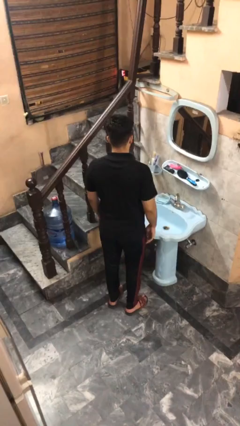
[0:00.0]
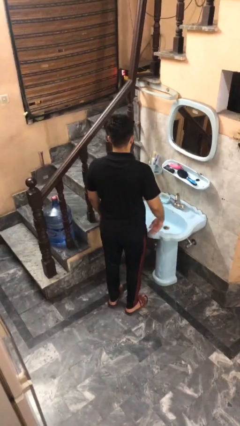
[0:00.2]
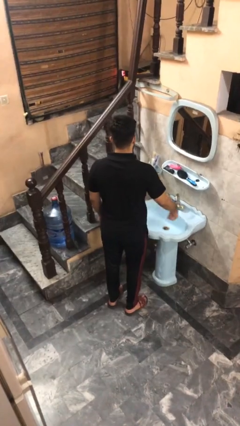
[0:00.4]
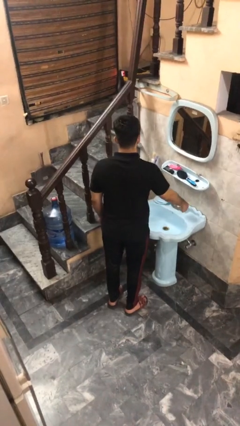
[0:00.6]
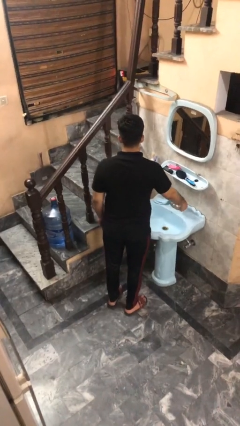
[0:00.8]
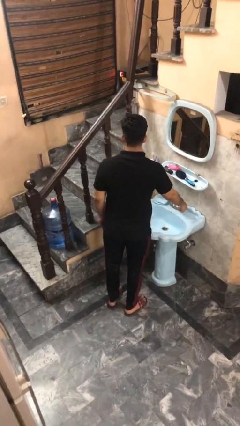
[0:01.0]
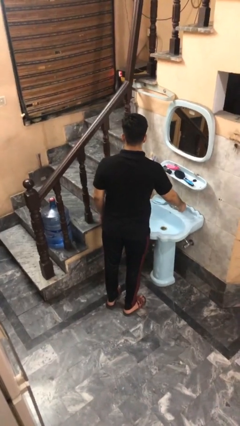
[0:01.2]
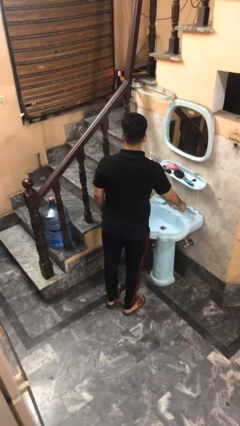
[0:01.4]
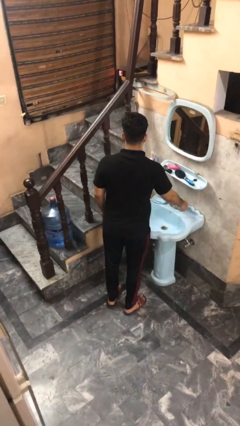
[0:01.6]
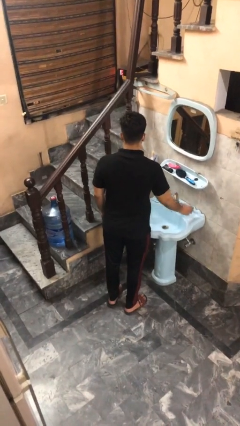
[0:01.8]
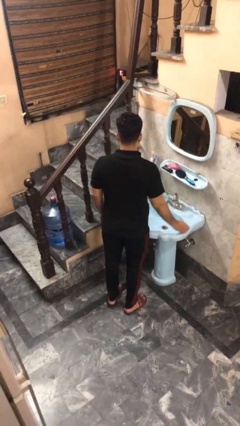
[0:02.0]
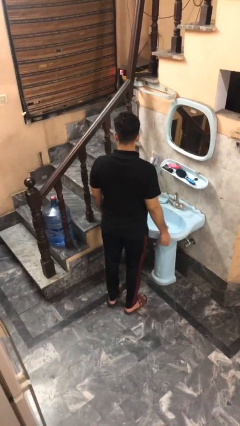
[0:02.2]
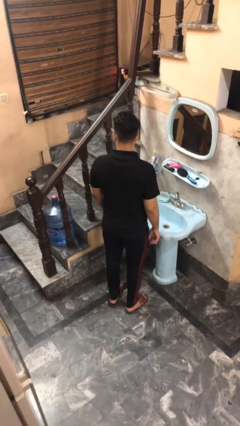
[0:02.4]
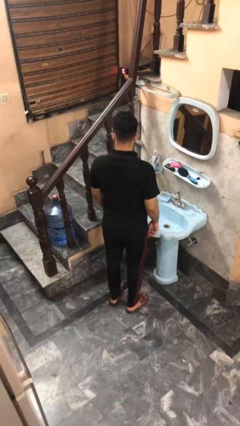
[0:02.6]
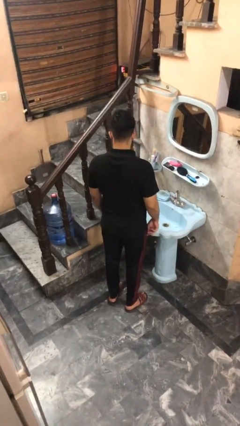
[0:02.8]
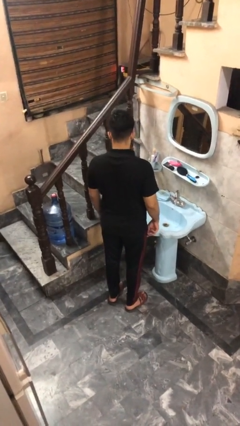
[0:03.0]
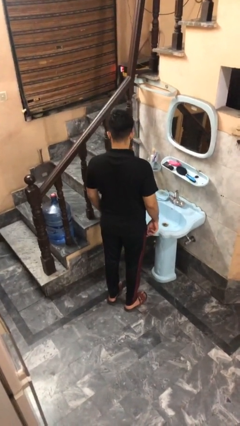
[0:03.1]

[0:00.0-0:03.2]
person turns on faucet

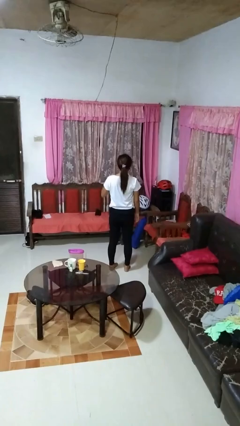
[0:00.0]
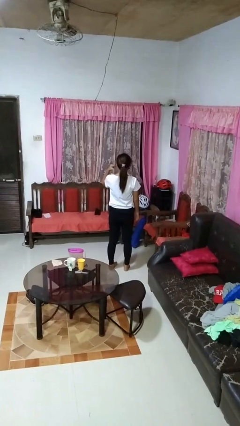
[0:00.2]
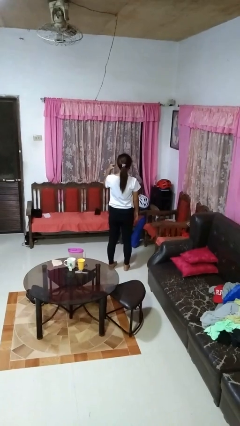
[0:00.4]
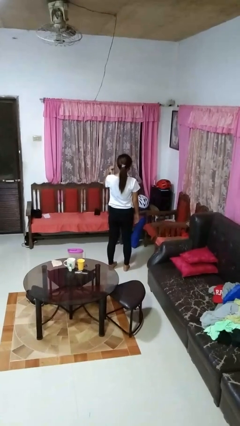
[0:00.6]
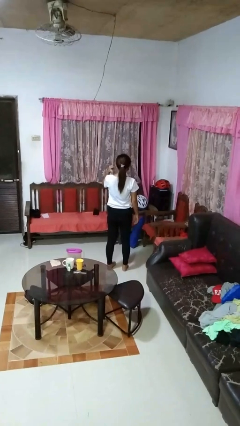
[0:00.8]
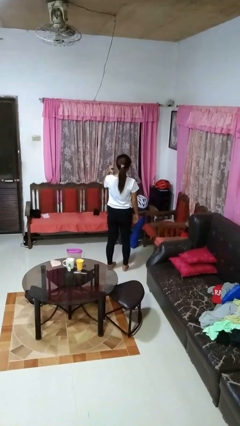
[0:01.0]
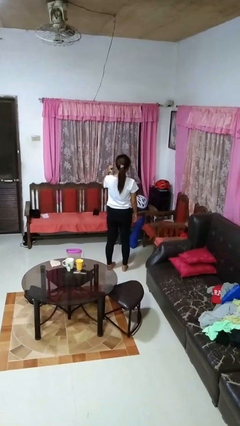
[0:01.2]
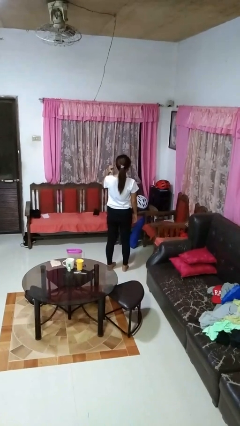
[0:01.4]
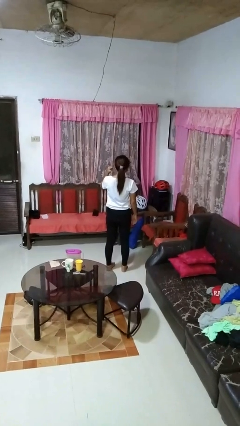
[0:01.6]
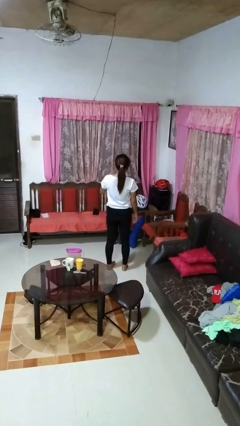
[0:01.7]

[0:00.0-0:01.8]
person gestures behind me

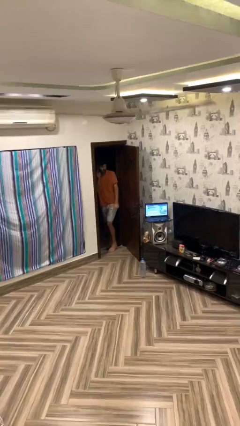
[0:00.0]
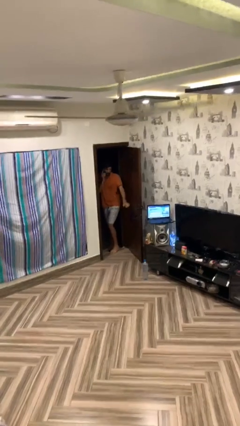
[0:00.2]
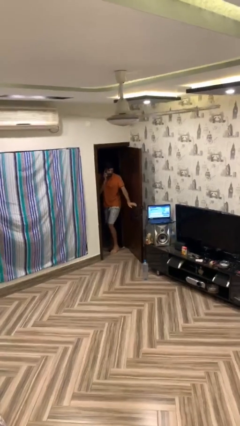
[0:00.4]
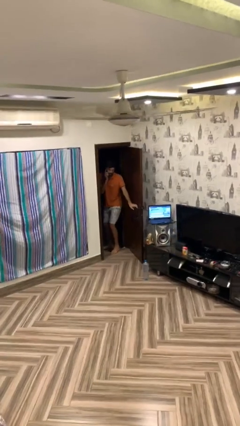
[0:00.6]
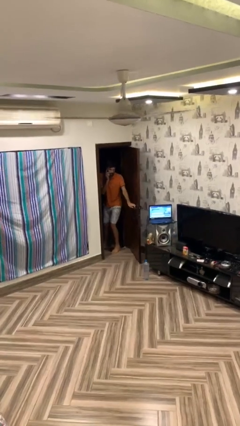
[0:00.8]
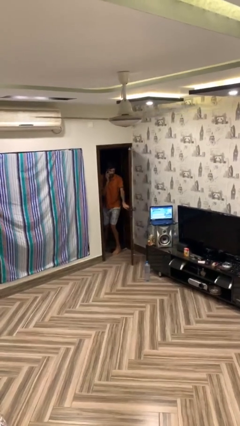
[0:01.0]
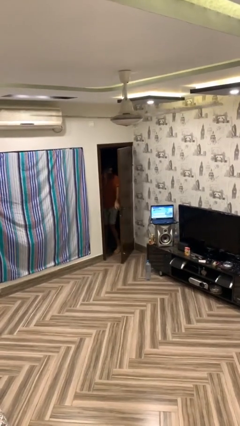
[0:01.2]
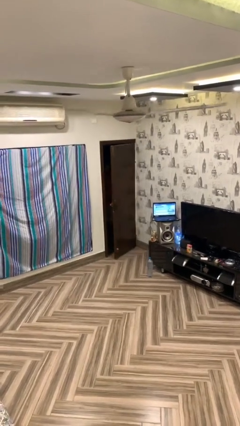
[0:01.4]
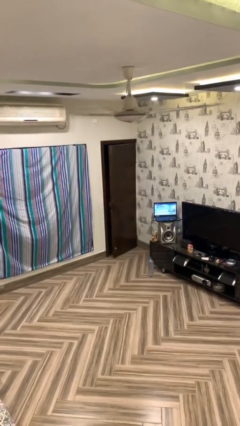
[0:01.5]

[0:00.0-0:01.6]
person closes facility door

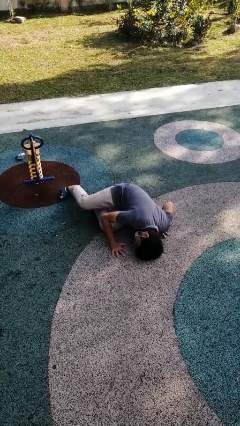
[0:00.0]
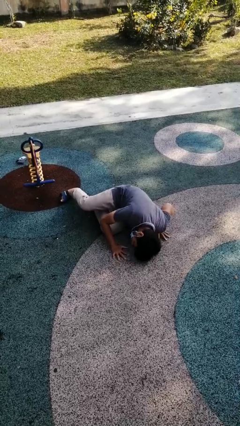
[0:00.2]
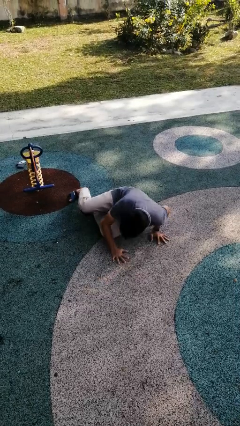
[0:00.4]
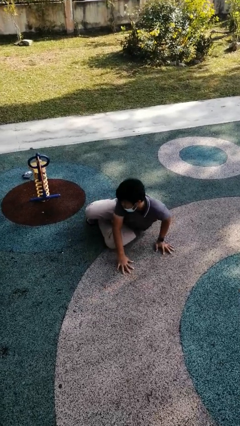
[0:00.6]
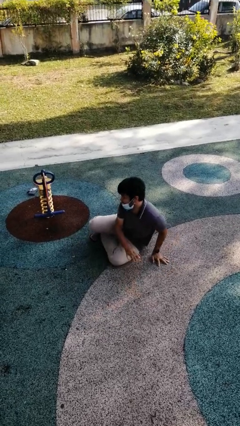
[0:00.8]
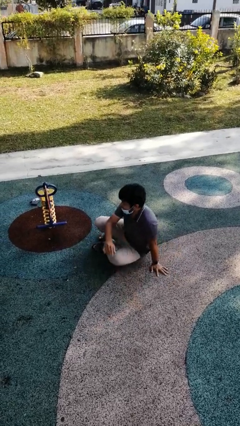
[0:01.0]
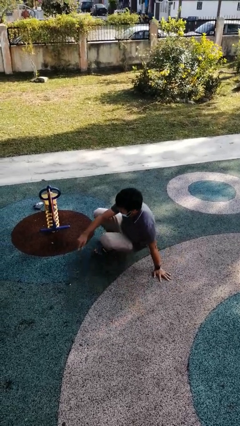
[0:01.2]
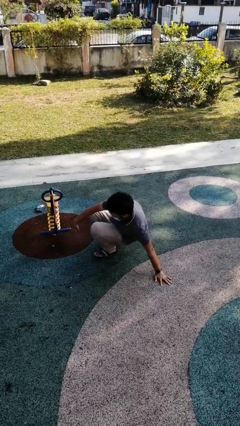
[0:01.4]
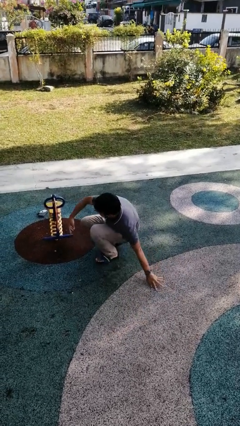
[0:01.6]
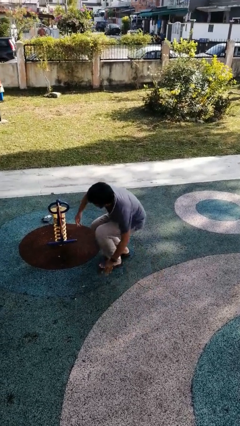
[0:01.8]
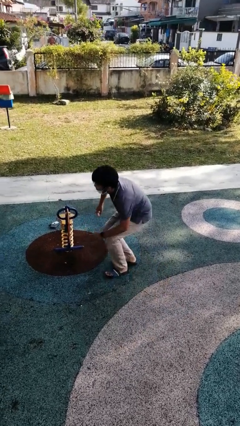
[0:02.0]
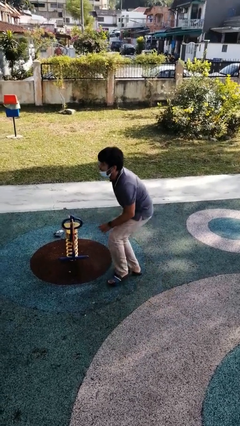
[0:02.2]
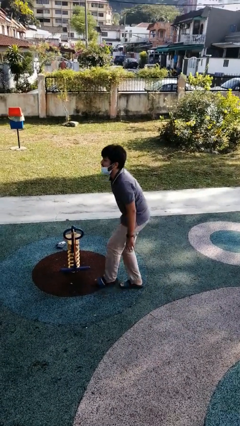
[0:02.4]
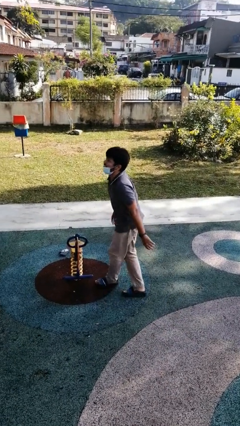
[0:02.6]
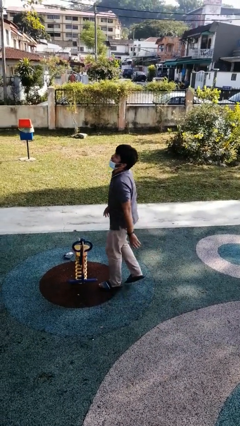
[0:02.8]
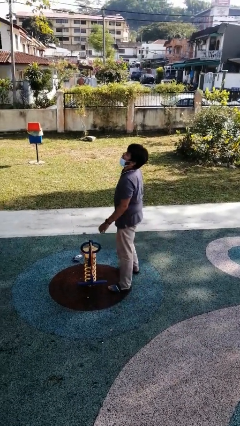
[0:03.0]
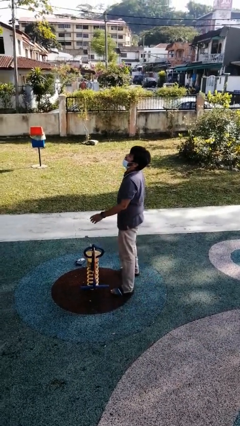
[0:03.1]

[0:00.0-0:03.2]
person stands up from floor

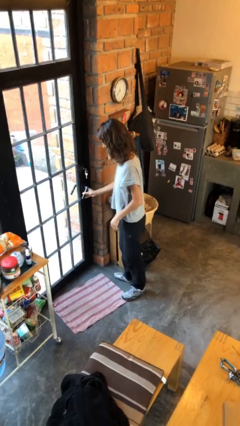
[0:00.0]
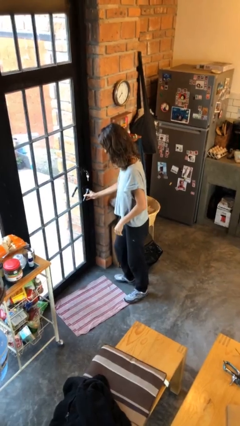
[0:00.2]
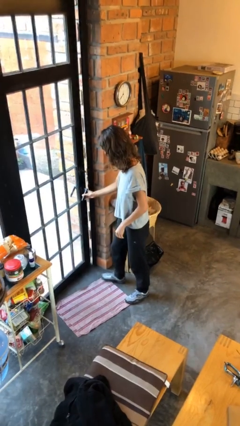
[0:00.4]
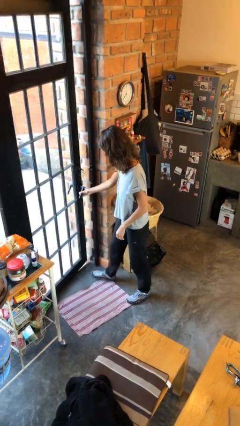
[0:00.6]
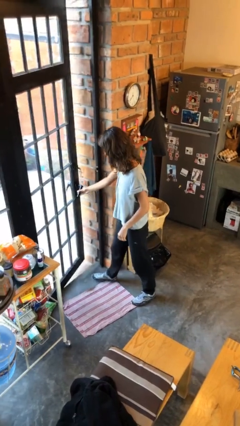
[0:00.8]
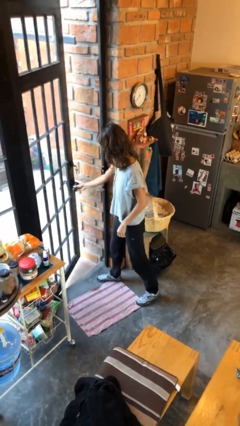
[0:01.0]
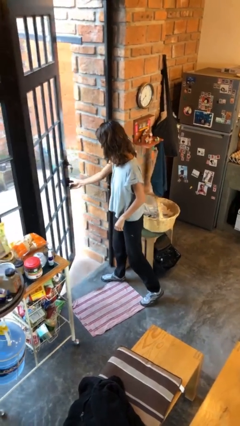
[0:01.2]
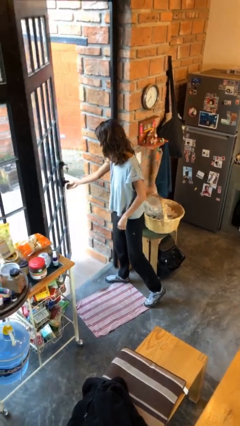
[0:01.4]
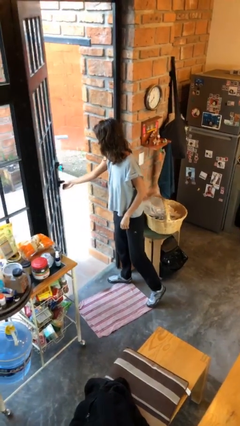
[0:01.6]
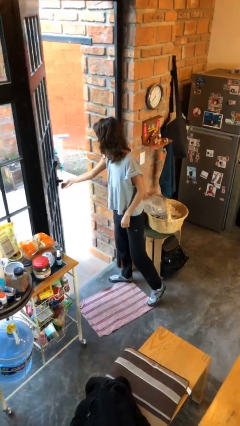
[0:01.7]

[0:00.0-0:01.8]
person opens facility door

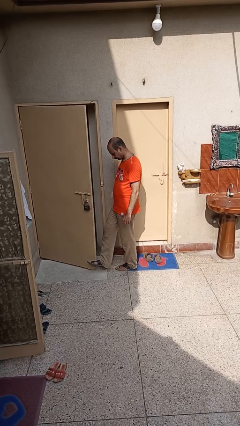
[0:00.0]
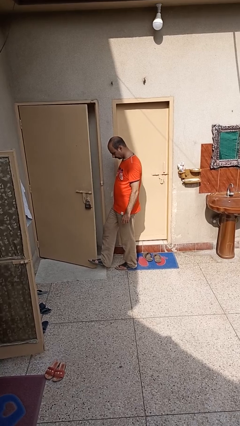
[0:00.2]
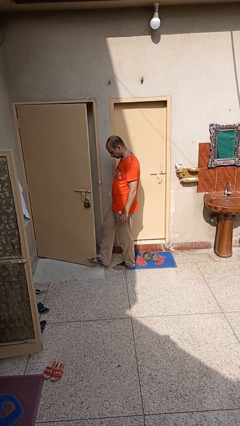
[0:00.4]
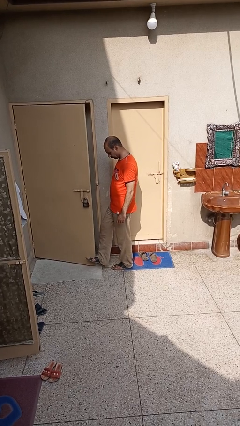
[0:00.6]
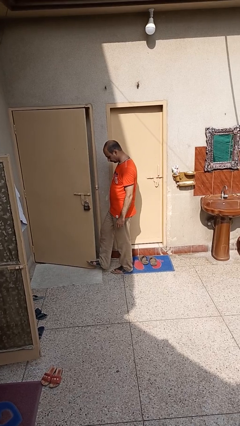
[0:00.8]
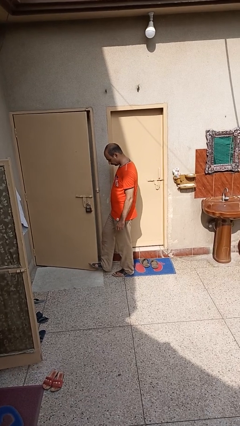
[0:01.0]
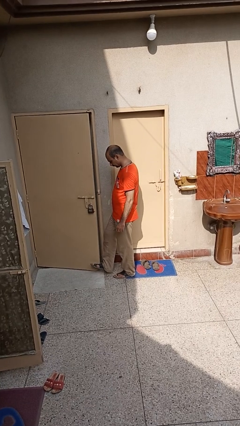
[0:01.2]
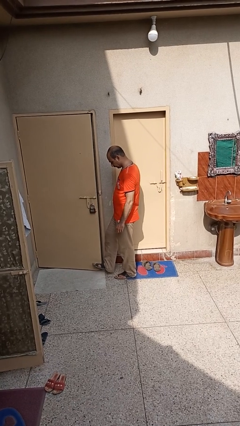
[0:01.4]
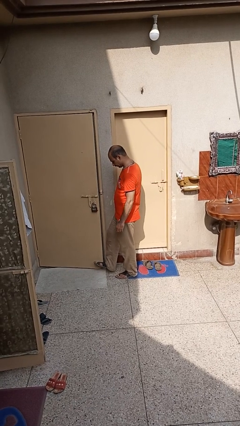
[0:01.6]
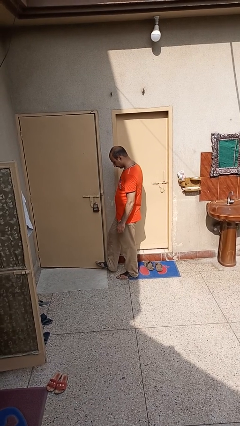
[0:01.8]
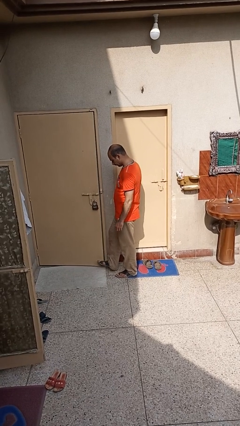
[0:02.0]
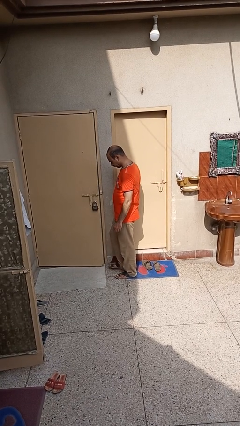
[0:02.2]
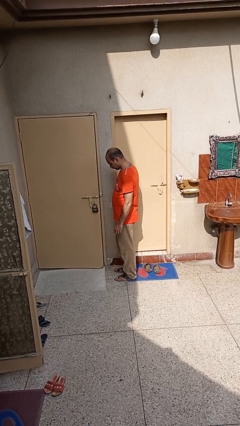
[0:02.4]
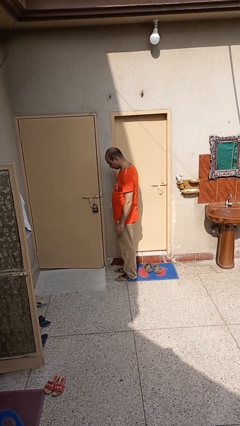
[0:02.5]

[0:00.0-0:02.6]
person closes door with foot

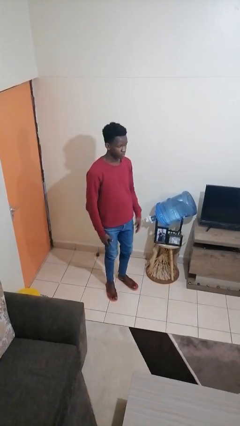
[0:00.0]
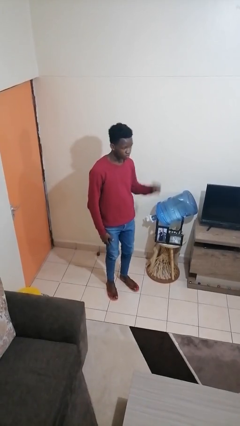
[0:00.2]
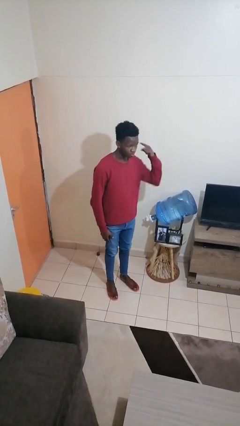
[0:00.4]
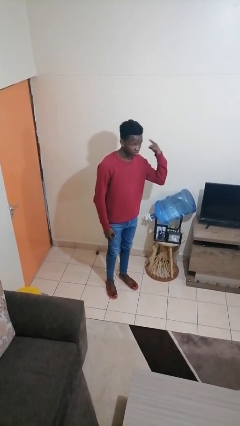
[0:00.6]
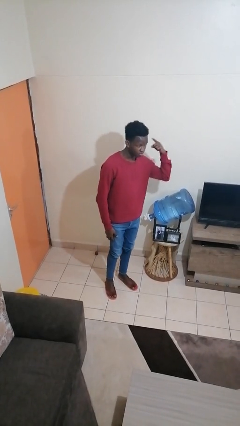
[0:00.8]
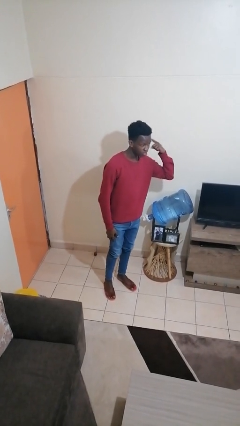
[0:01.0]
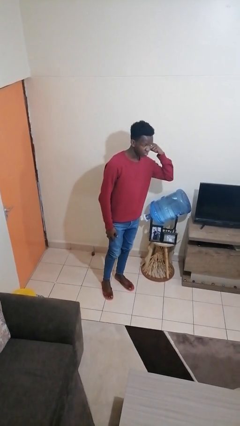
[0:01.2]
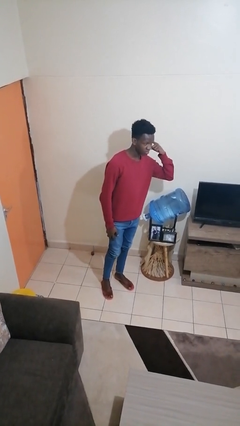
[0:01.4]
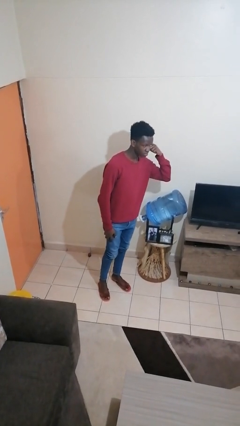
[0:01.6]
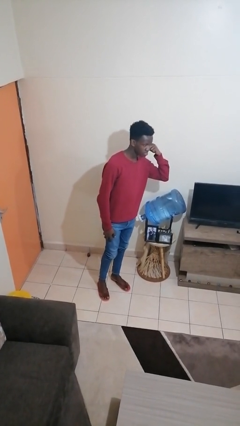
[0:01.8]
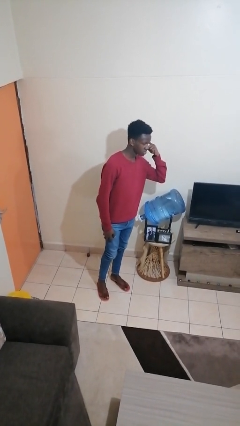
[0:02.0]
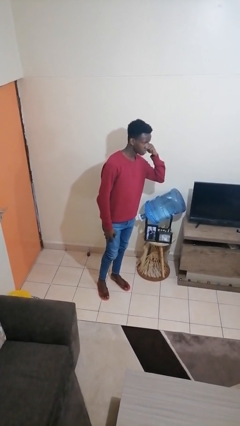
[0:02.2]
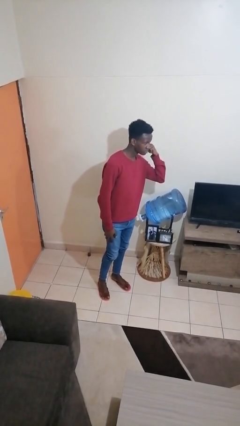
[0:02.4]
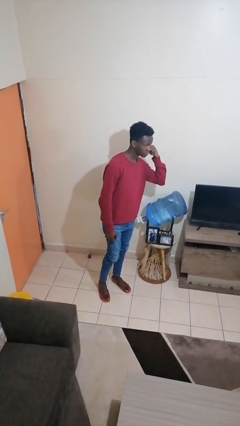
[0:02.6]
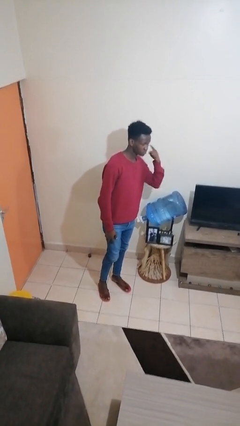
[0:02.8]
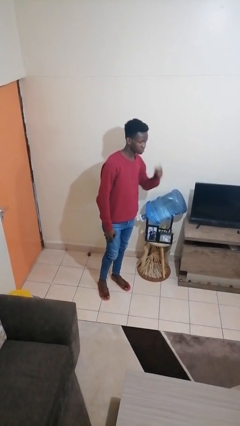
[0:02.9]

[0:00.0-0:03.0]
person gestures listen closely
